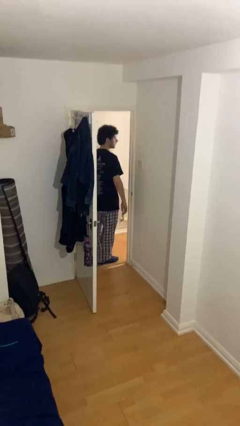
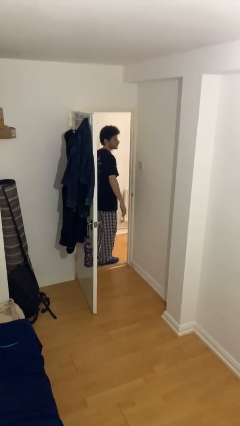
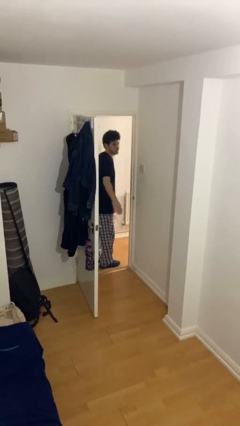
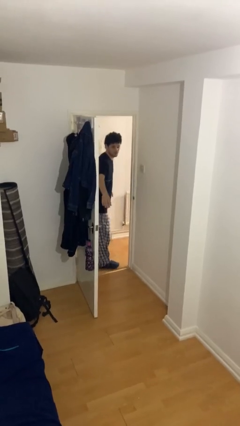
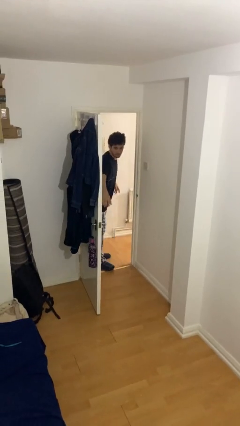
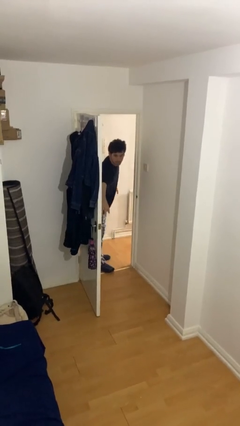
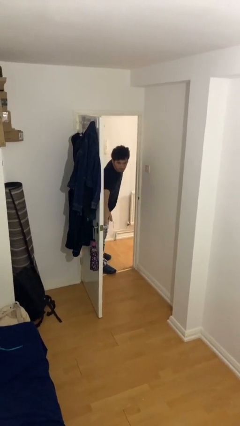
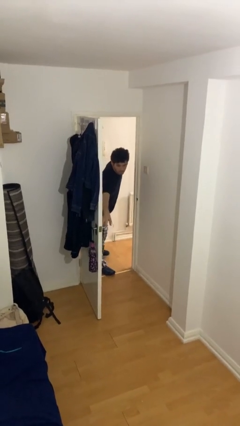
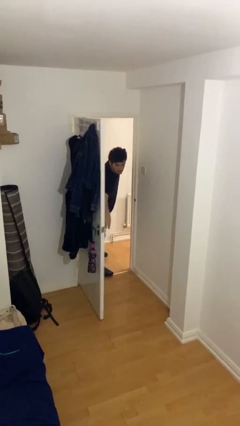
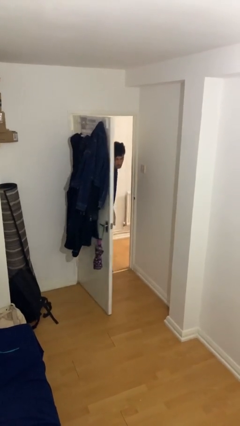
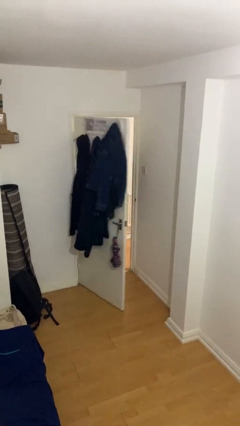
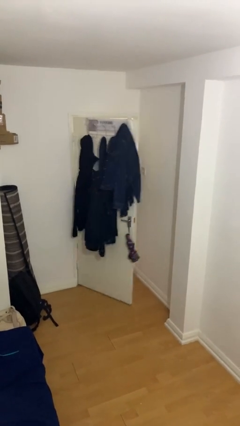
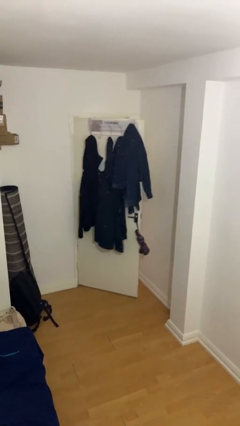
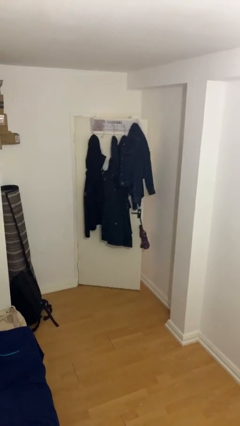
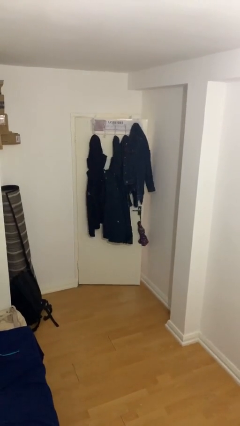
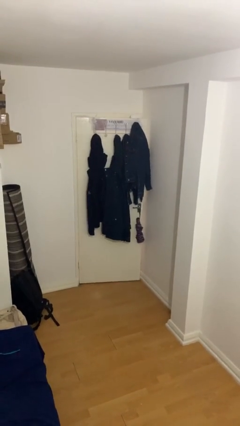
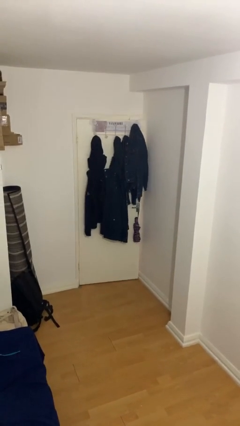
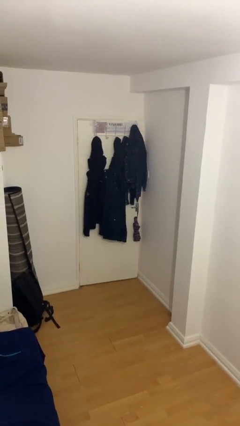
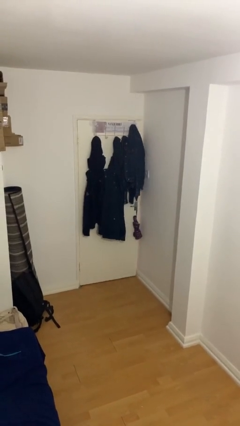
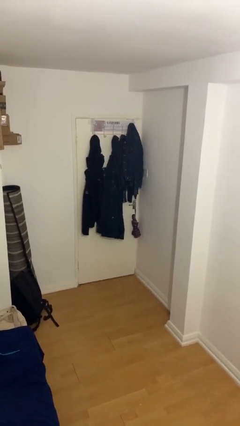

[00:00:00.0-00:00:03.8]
person closes facility door

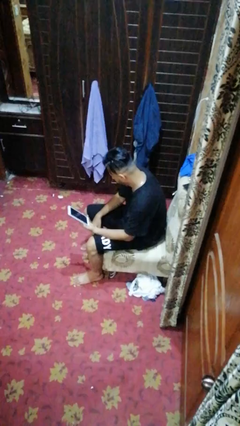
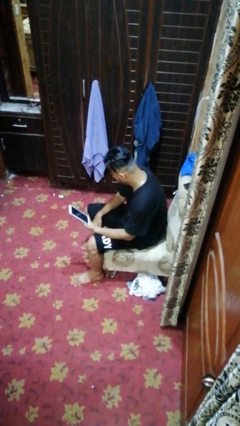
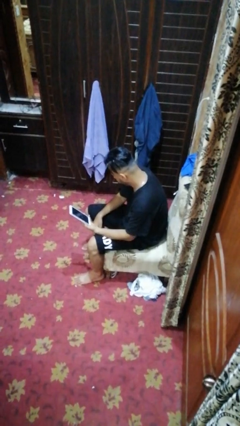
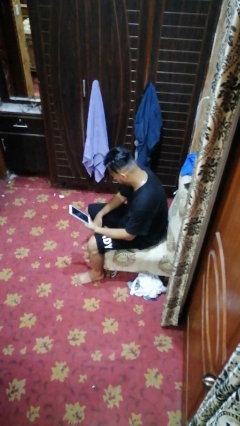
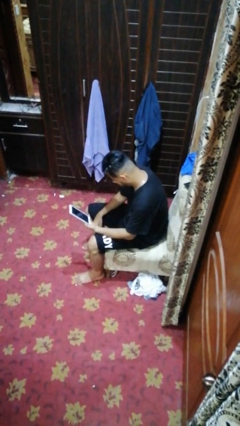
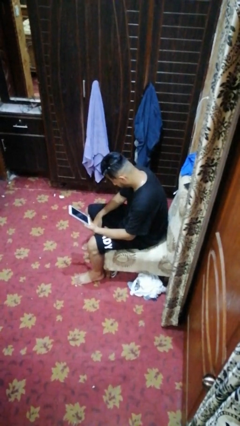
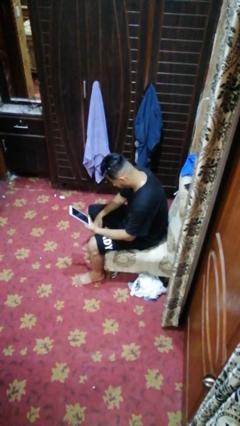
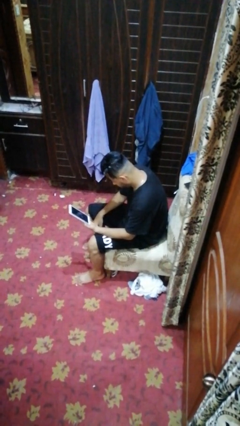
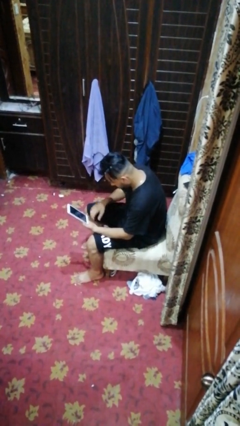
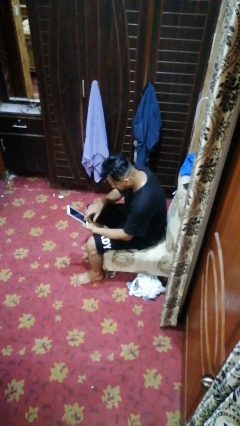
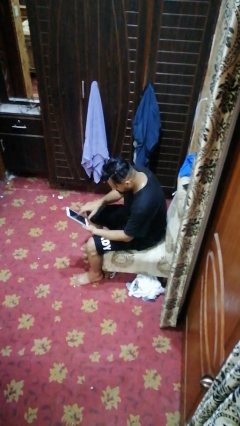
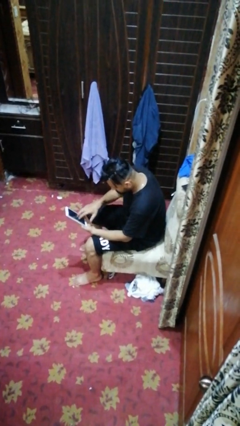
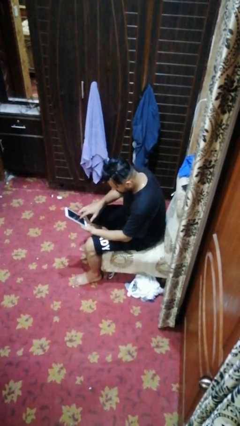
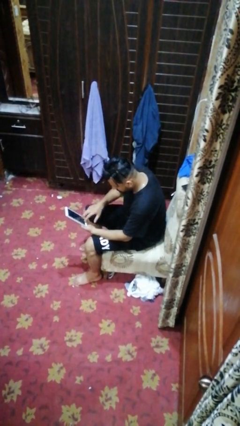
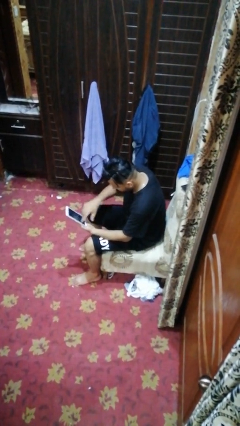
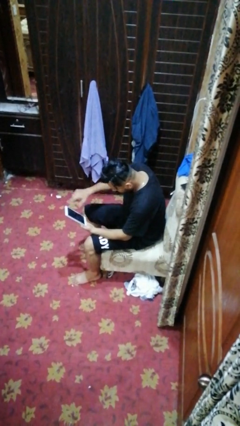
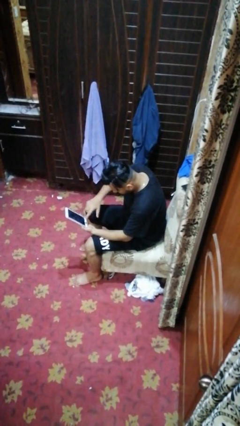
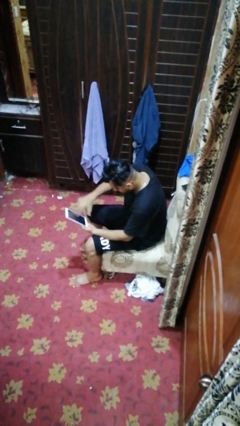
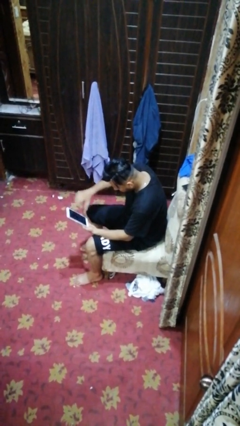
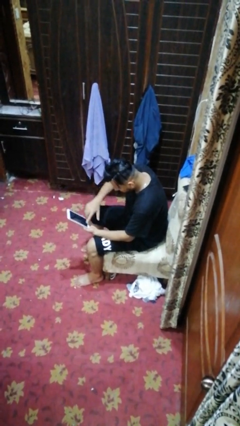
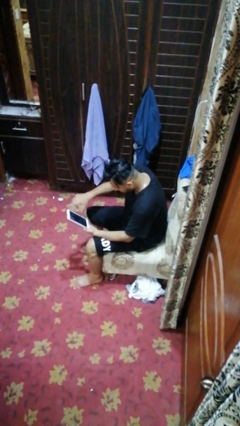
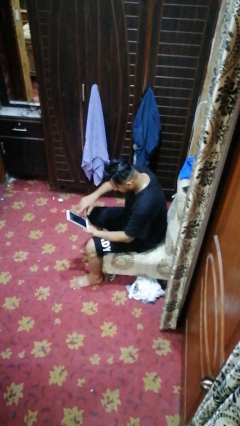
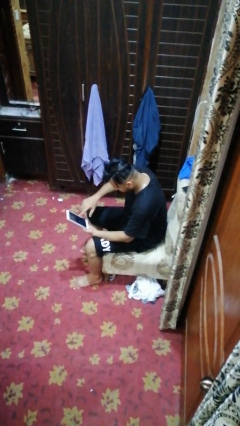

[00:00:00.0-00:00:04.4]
person interacts with tablet

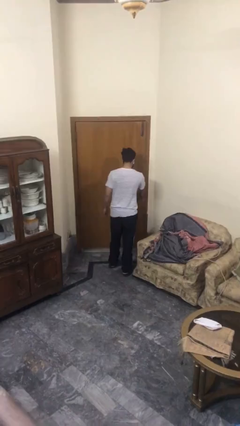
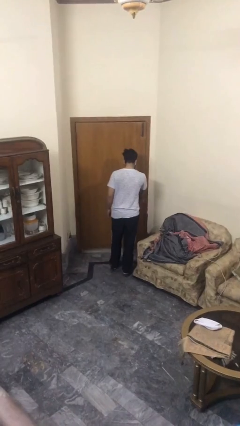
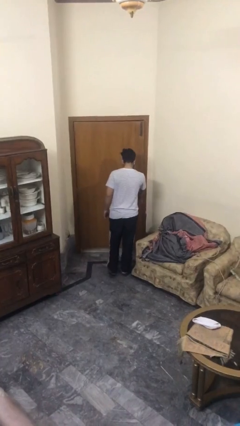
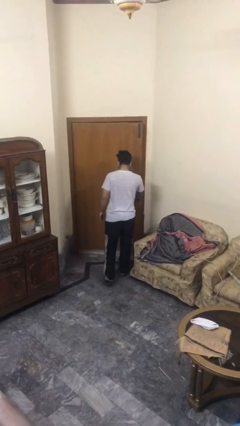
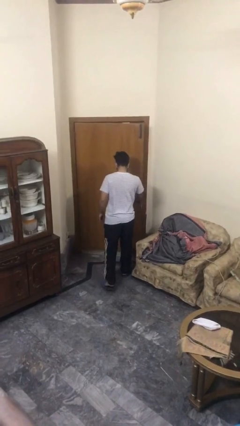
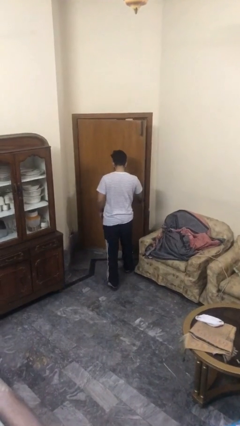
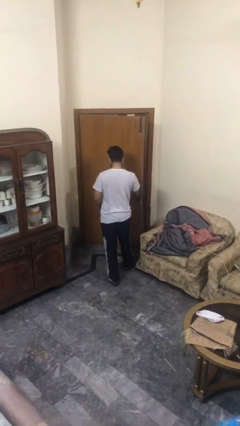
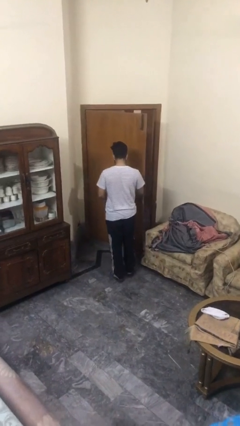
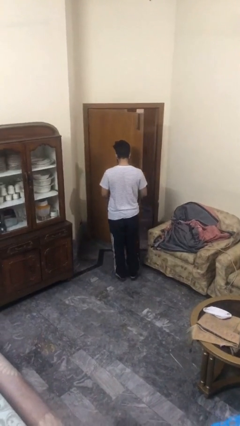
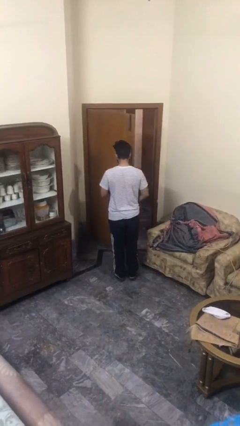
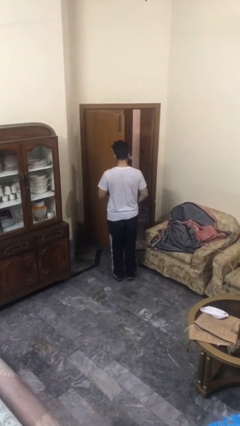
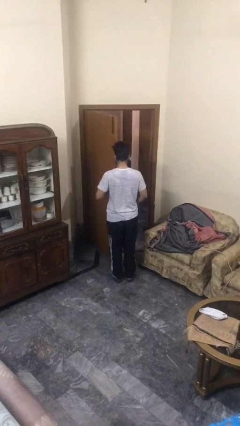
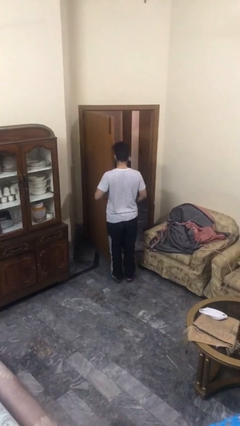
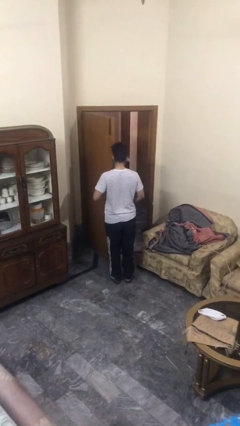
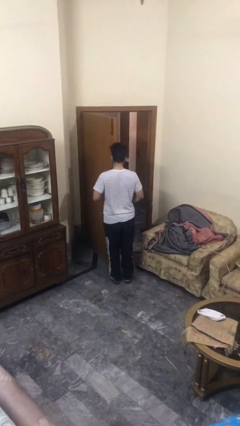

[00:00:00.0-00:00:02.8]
person opens facility door

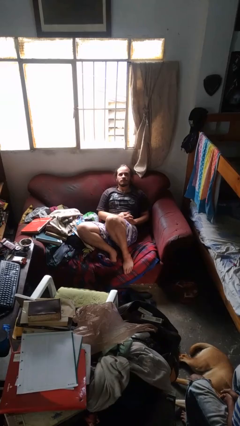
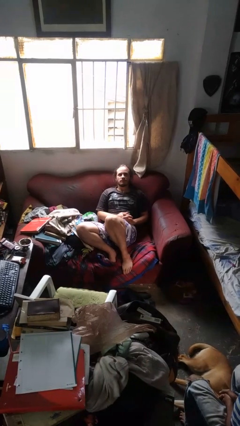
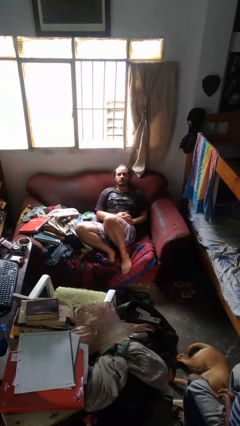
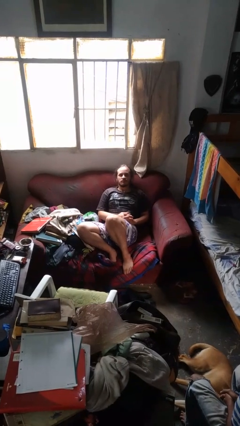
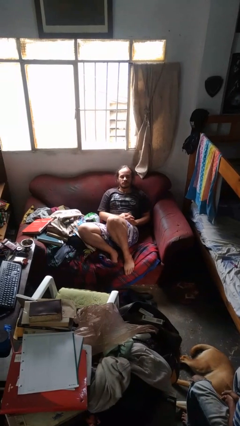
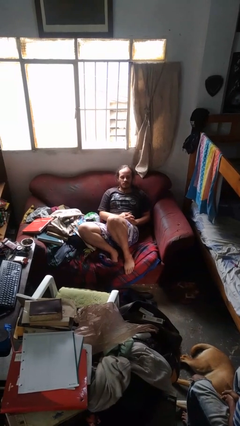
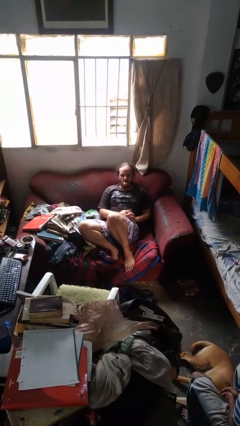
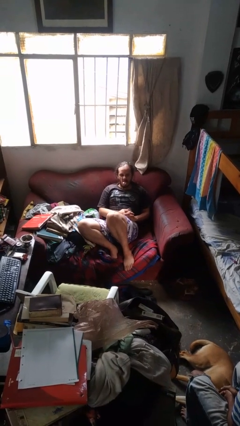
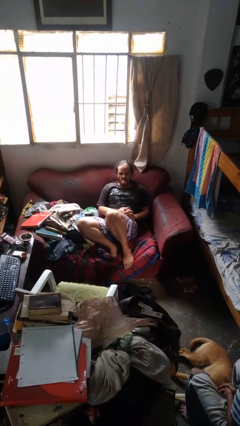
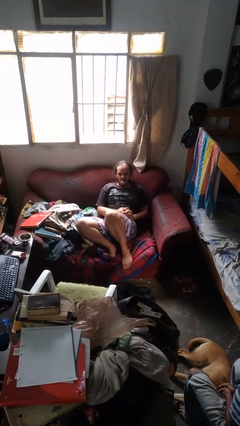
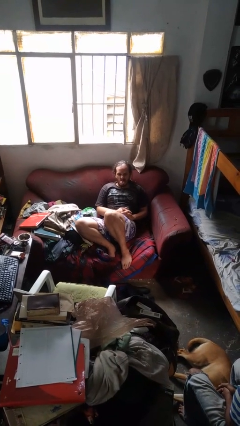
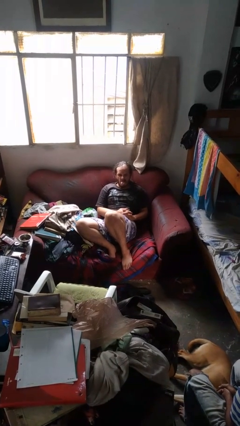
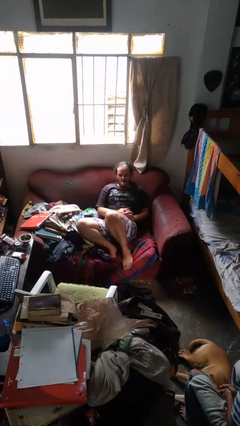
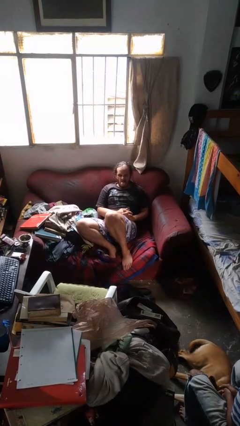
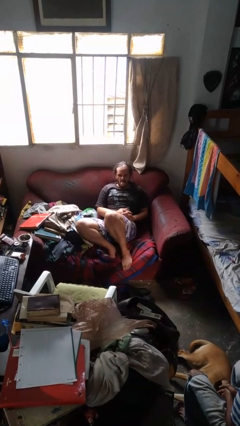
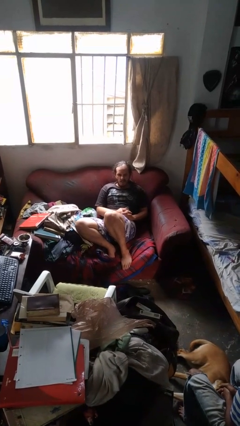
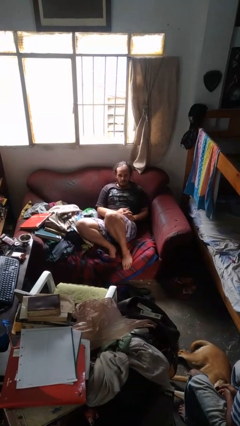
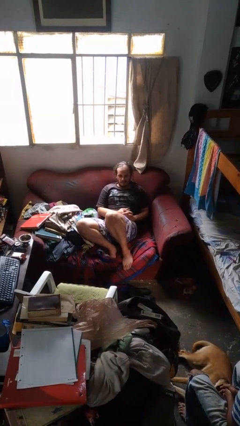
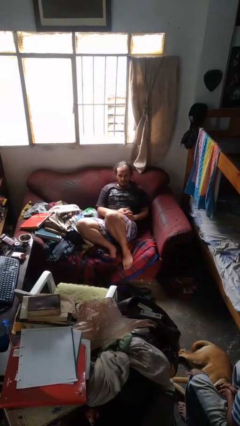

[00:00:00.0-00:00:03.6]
person sticks out tongue

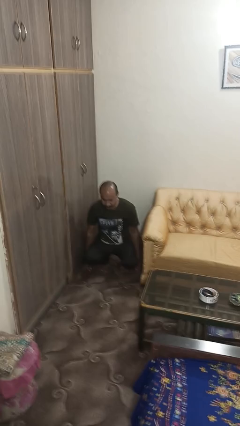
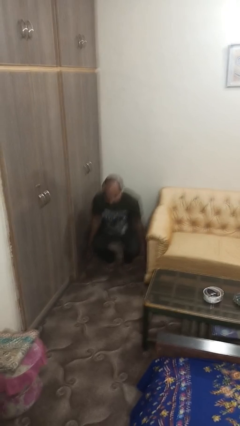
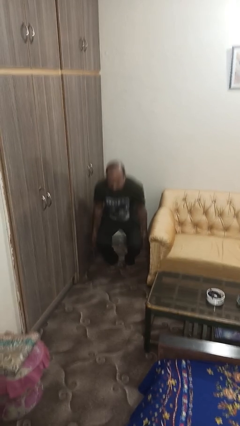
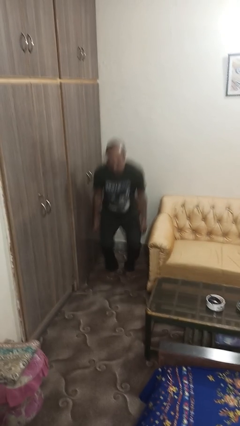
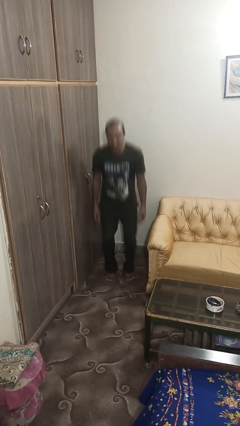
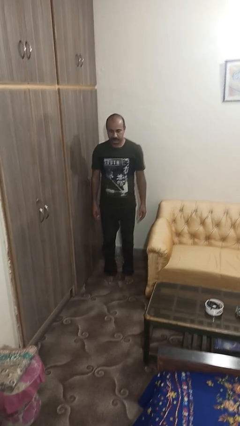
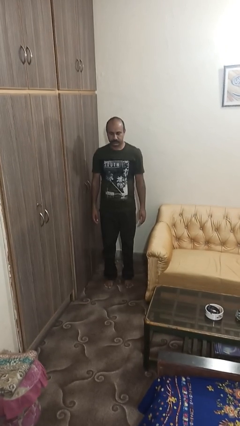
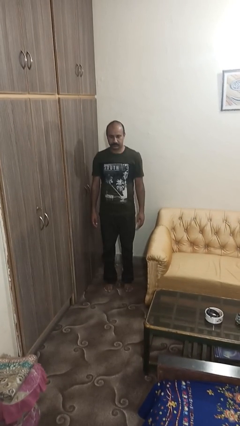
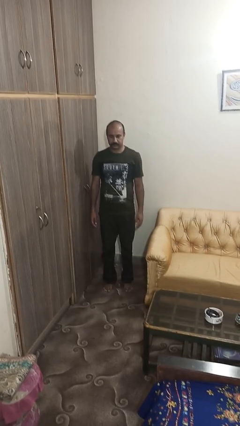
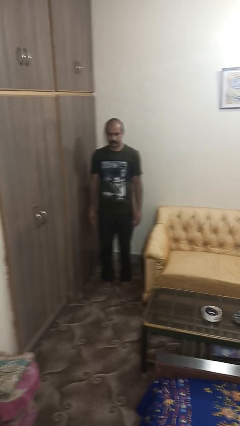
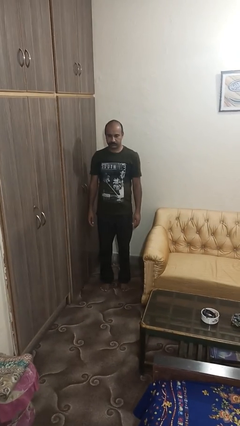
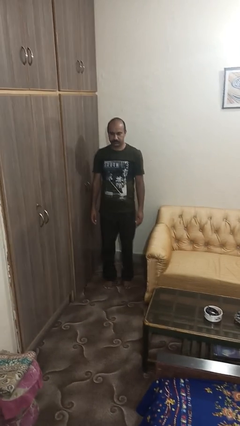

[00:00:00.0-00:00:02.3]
person stands up

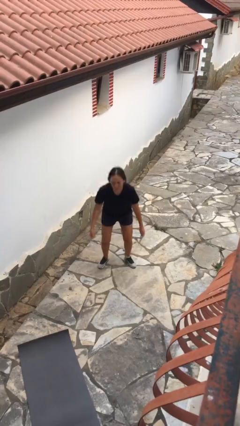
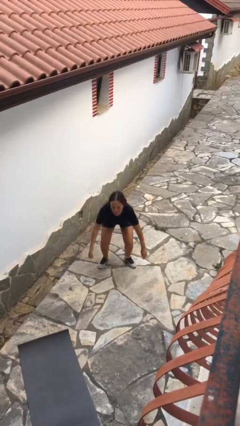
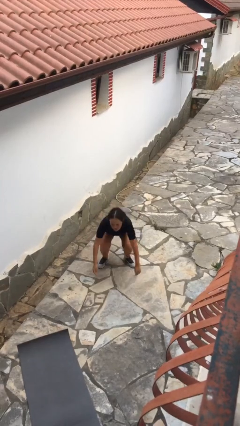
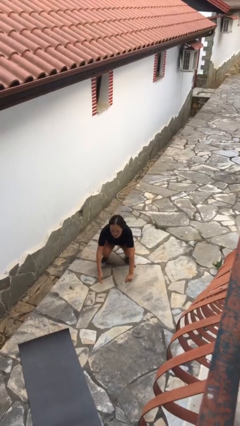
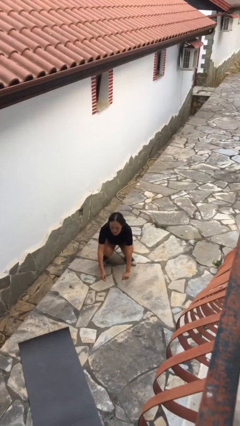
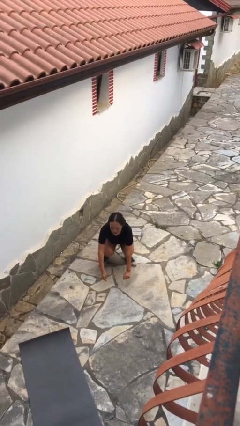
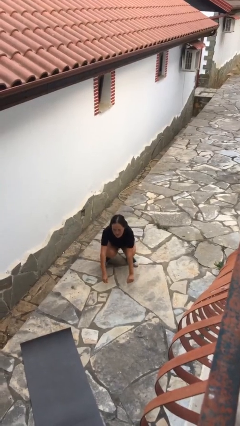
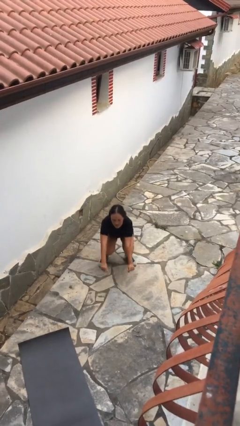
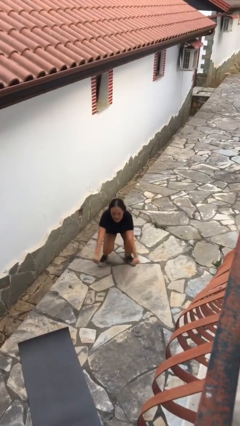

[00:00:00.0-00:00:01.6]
person squats
